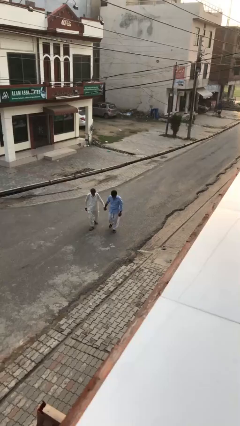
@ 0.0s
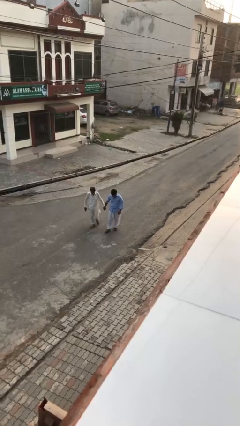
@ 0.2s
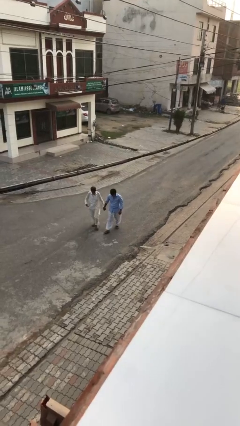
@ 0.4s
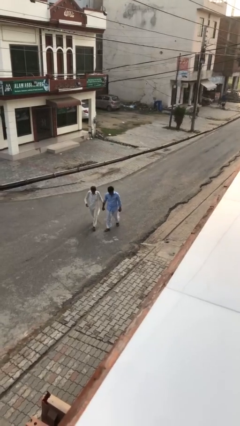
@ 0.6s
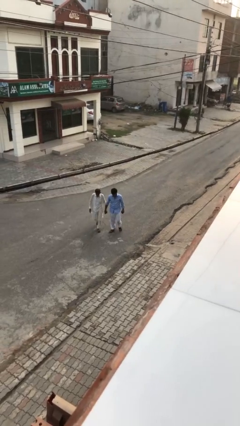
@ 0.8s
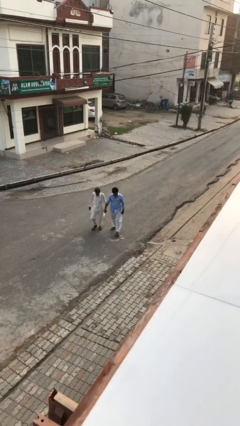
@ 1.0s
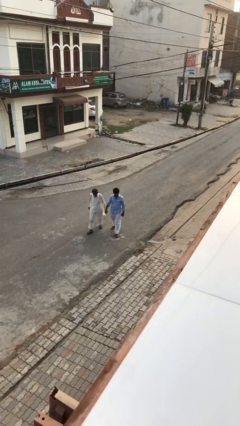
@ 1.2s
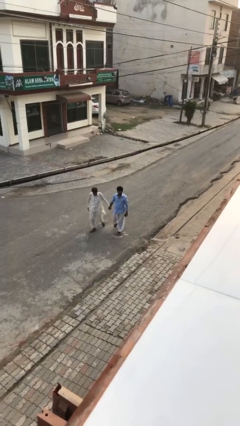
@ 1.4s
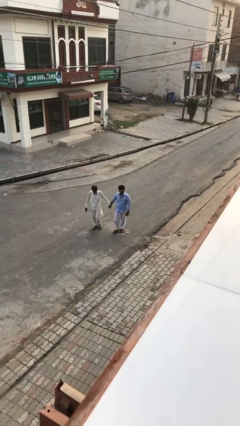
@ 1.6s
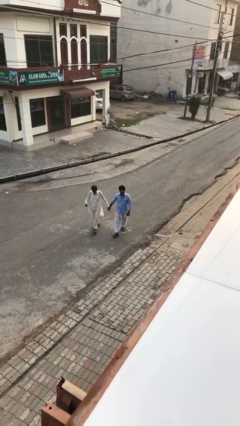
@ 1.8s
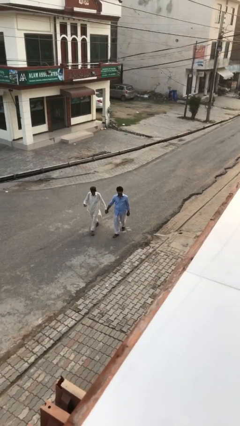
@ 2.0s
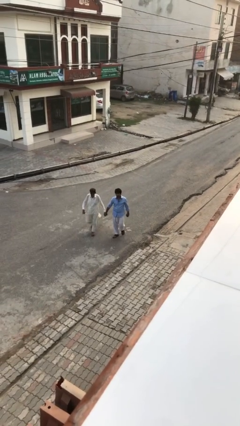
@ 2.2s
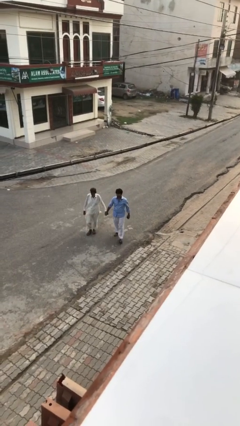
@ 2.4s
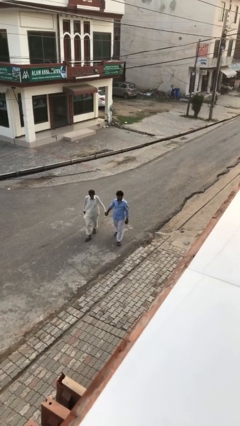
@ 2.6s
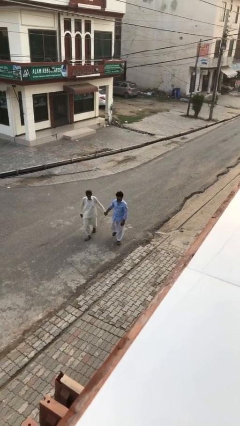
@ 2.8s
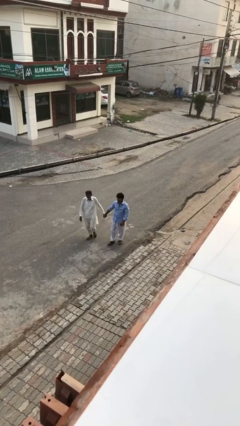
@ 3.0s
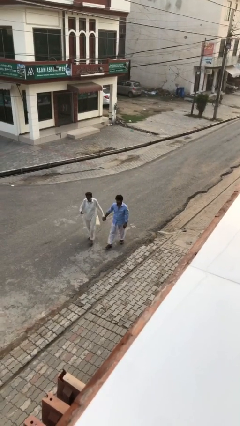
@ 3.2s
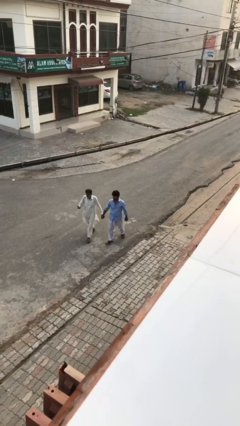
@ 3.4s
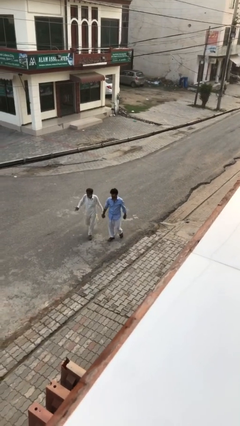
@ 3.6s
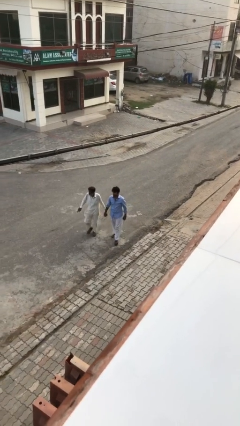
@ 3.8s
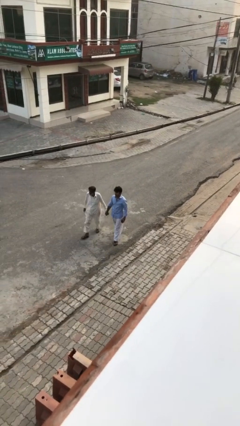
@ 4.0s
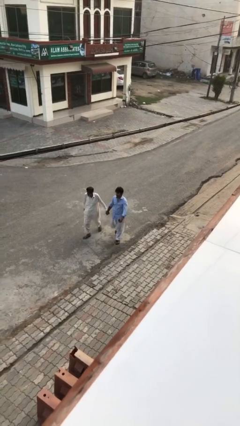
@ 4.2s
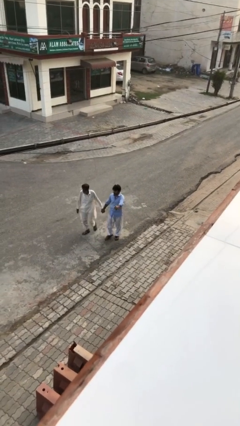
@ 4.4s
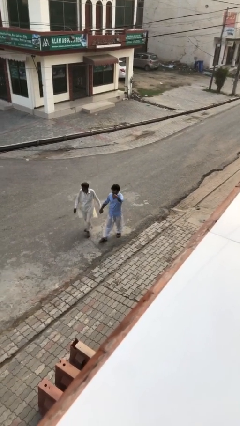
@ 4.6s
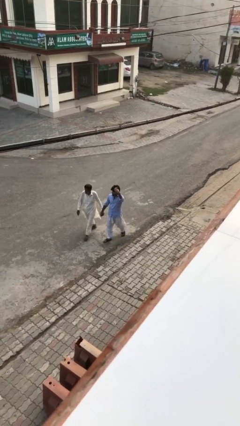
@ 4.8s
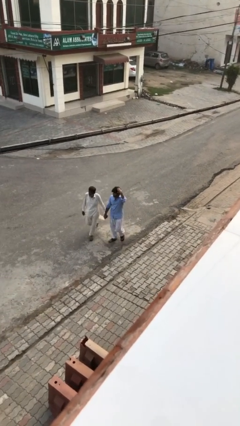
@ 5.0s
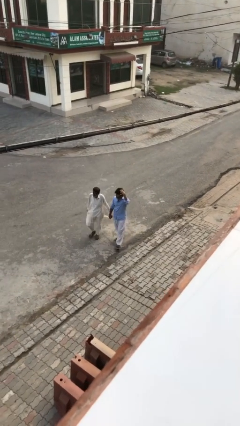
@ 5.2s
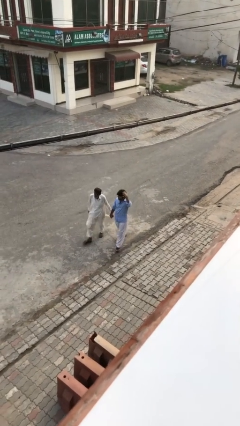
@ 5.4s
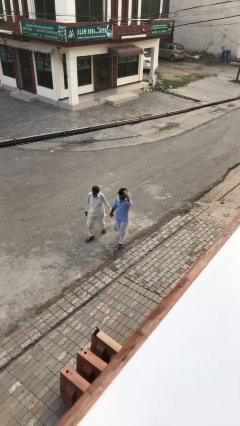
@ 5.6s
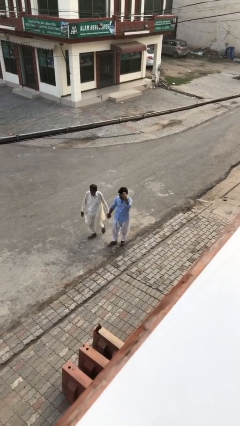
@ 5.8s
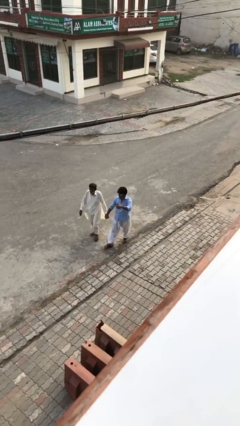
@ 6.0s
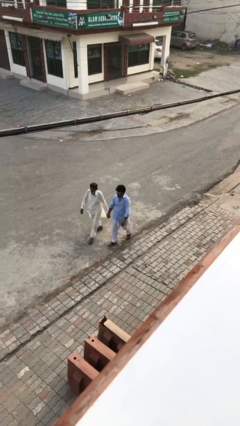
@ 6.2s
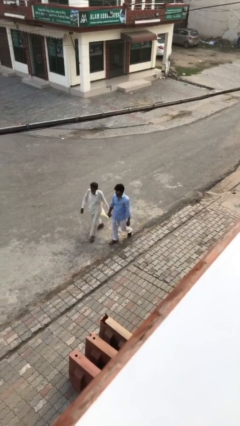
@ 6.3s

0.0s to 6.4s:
person holds hand

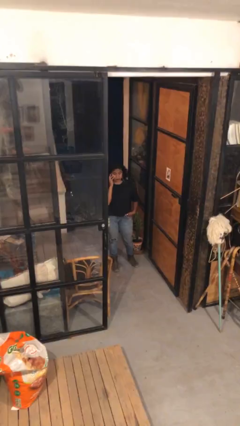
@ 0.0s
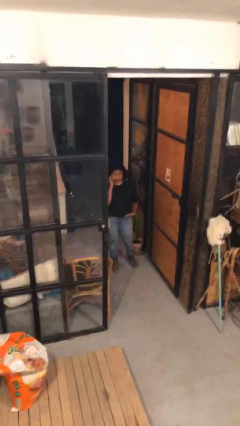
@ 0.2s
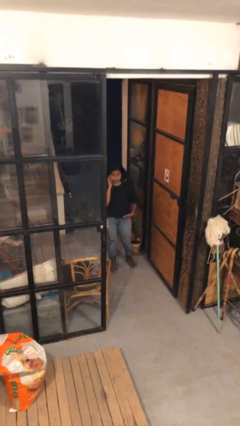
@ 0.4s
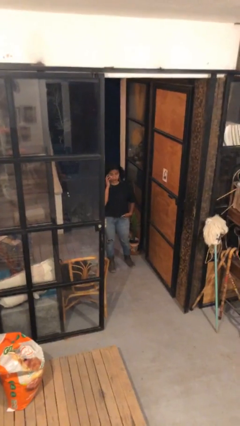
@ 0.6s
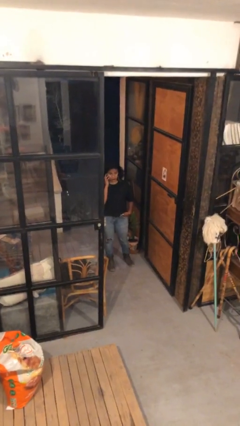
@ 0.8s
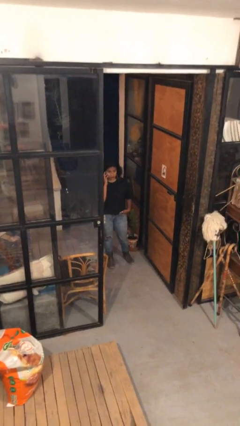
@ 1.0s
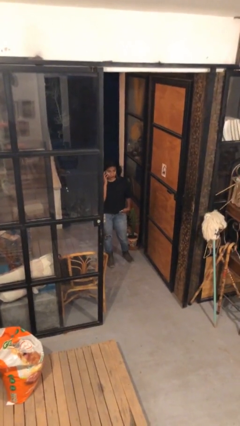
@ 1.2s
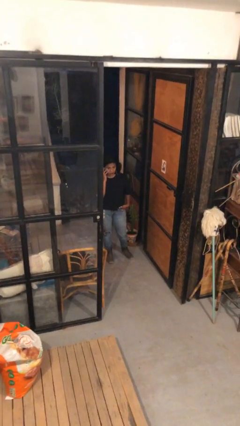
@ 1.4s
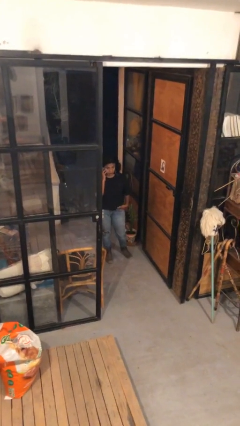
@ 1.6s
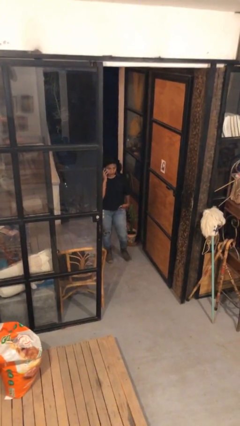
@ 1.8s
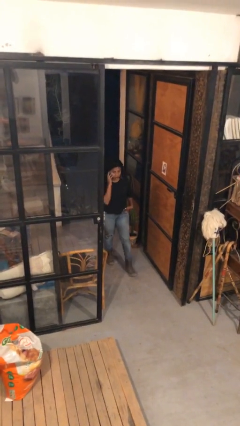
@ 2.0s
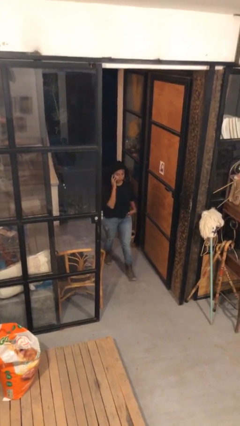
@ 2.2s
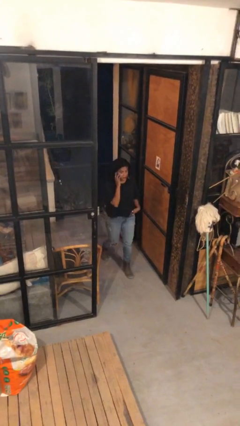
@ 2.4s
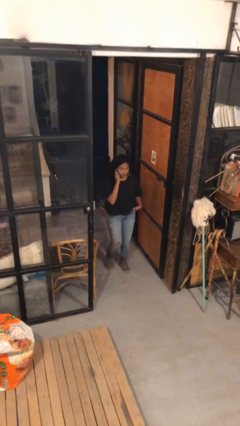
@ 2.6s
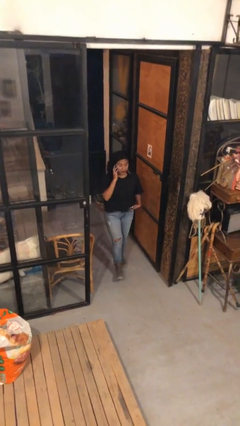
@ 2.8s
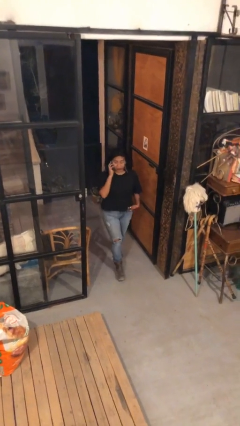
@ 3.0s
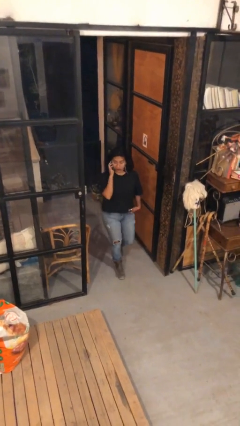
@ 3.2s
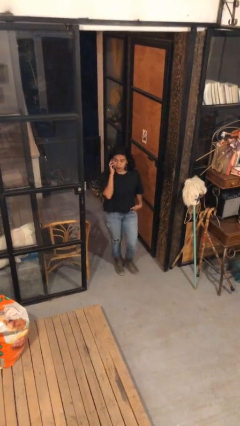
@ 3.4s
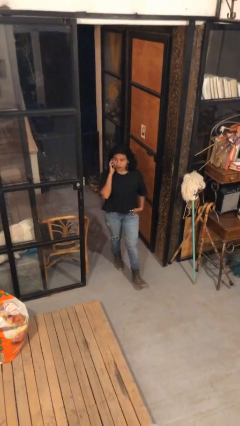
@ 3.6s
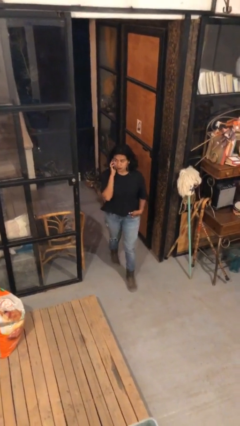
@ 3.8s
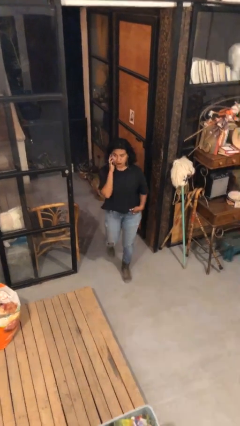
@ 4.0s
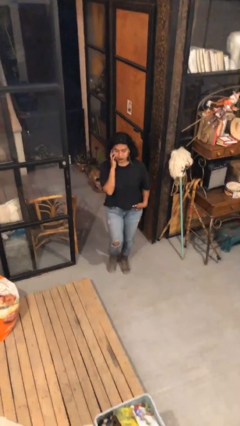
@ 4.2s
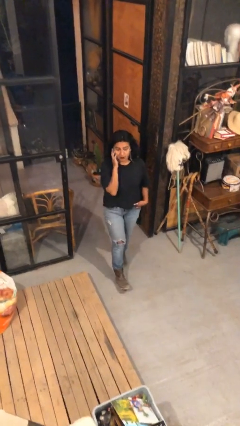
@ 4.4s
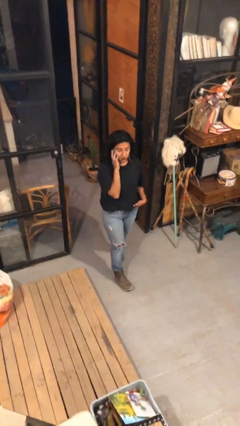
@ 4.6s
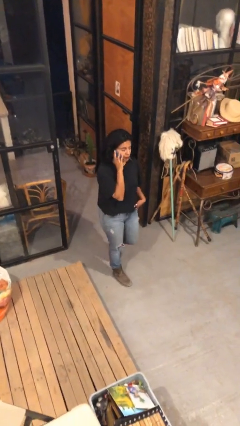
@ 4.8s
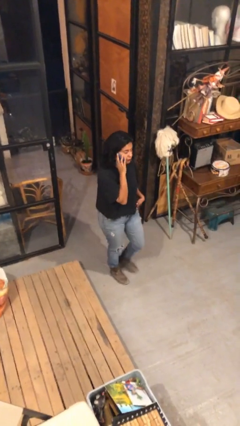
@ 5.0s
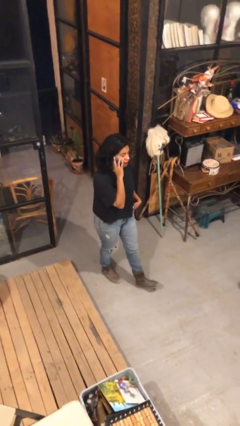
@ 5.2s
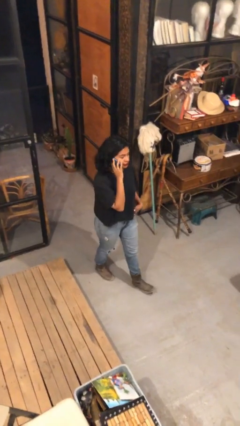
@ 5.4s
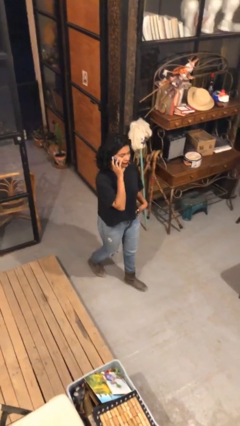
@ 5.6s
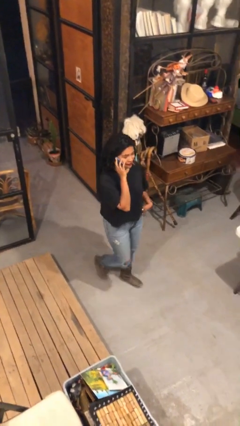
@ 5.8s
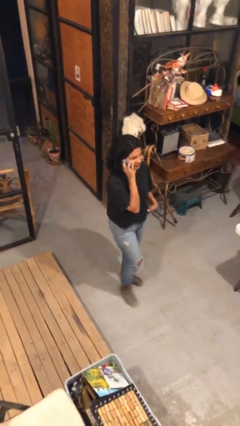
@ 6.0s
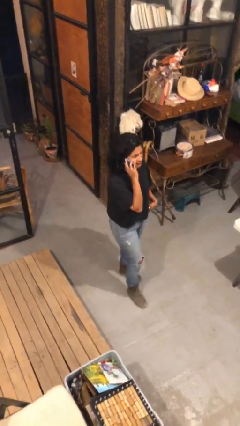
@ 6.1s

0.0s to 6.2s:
person enters scene through structure

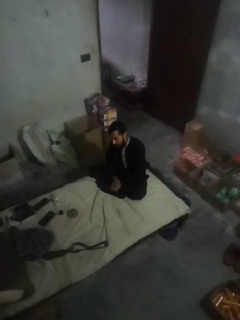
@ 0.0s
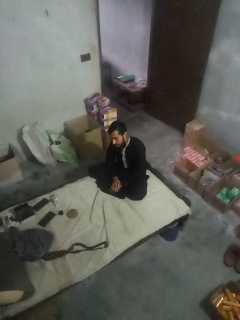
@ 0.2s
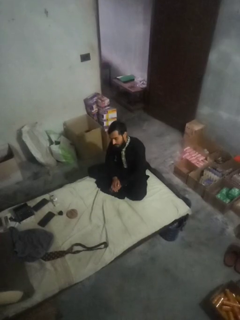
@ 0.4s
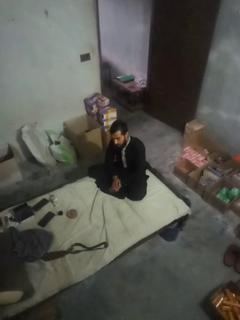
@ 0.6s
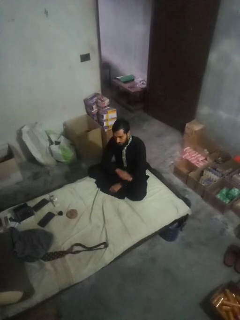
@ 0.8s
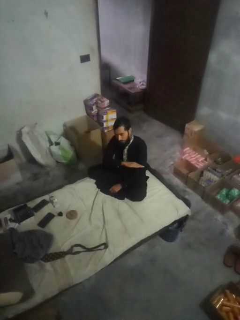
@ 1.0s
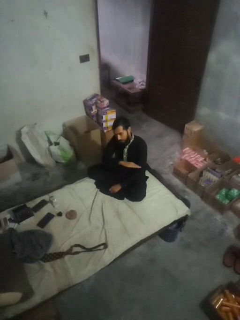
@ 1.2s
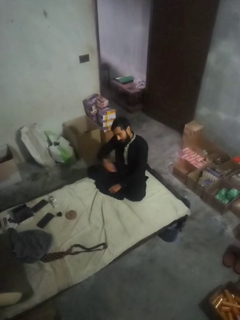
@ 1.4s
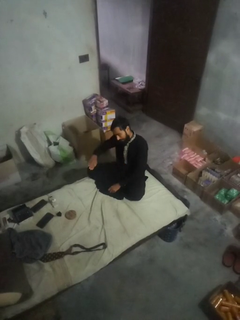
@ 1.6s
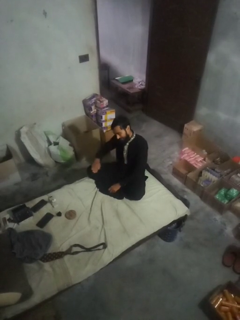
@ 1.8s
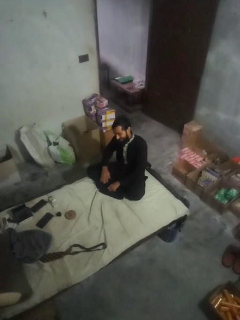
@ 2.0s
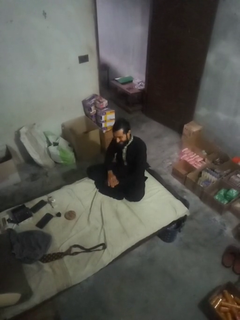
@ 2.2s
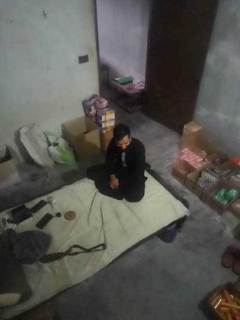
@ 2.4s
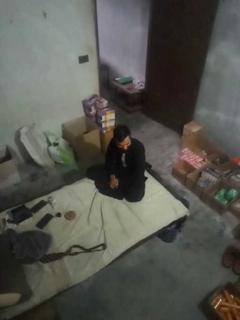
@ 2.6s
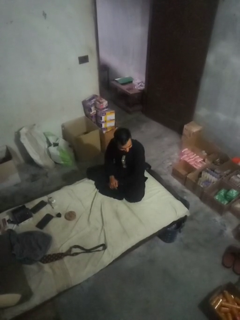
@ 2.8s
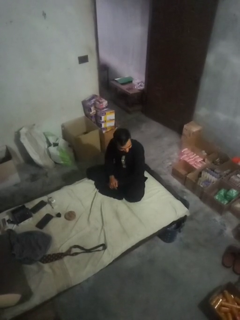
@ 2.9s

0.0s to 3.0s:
person gestures cut

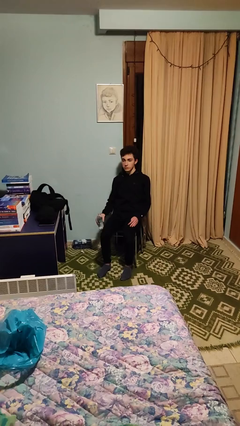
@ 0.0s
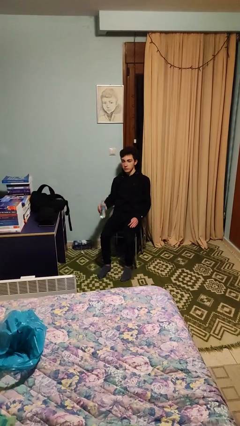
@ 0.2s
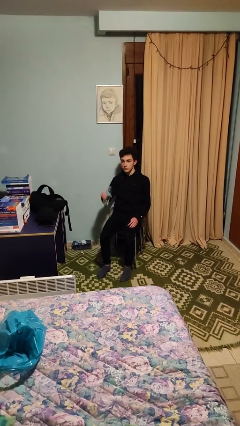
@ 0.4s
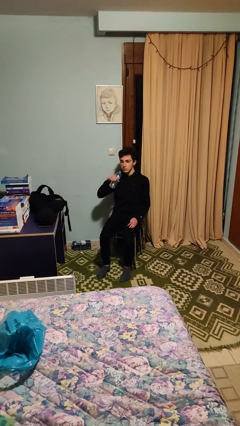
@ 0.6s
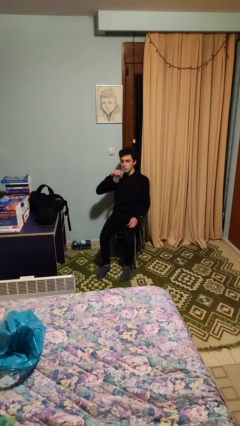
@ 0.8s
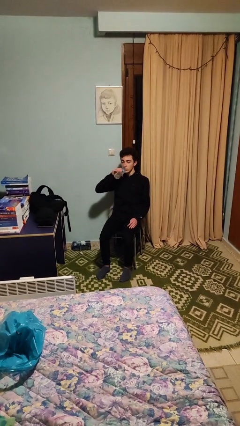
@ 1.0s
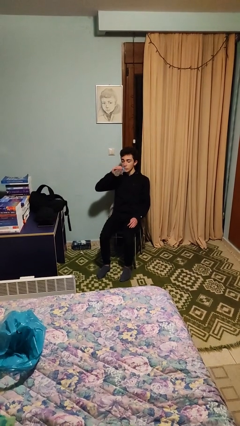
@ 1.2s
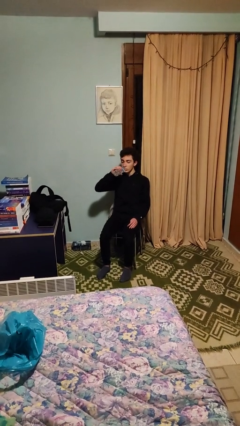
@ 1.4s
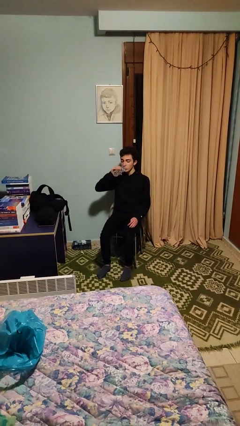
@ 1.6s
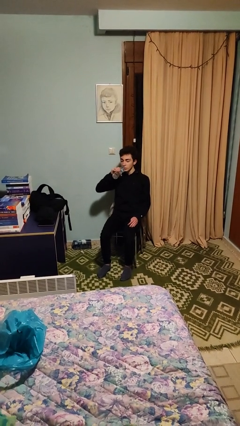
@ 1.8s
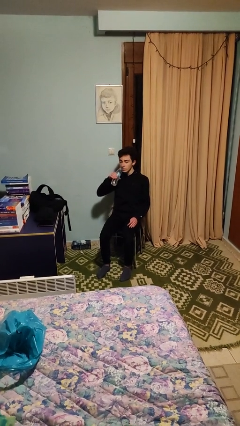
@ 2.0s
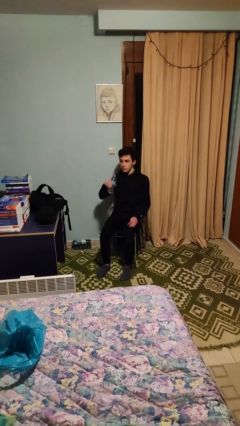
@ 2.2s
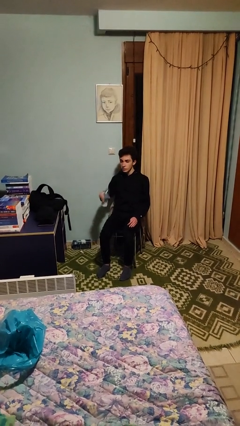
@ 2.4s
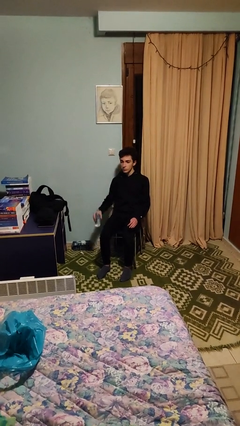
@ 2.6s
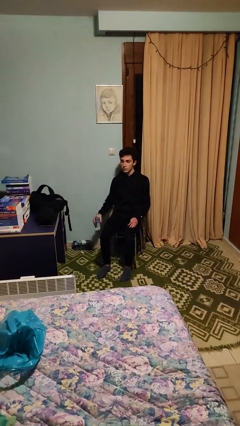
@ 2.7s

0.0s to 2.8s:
person drinks from bottle
